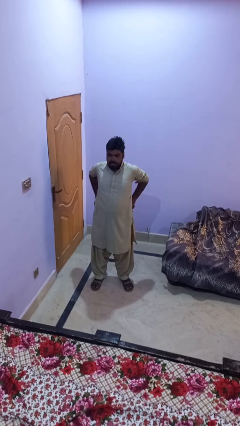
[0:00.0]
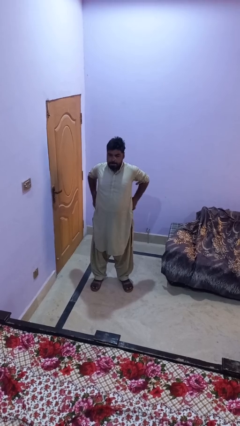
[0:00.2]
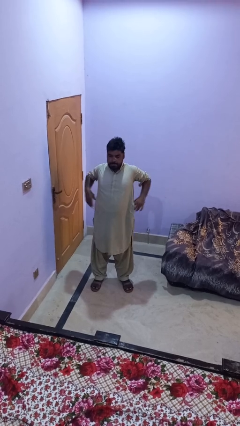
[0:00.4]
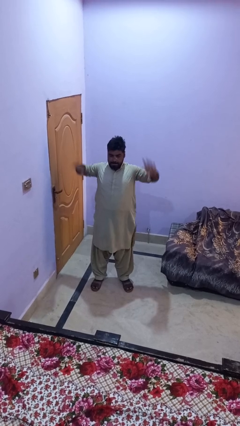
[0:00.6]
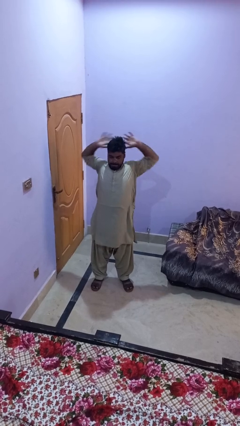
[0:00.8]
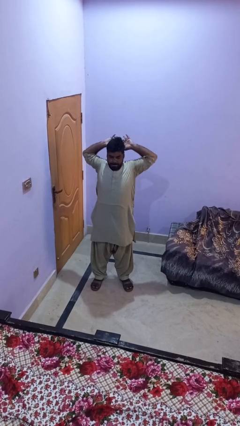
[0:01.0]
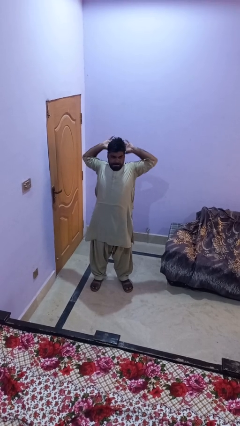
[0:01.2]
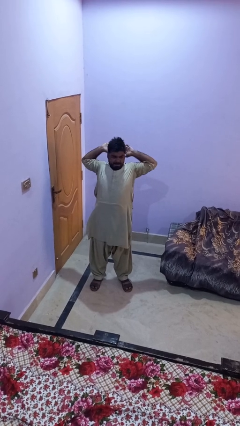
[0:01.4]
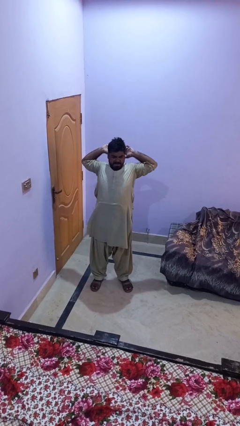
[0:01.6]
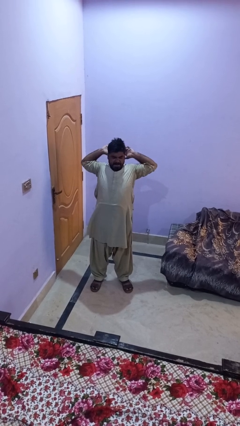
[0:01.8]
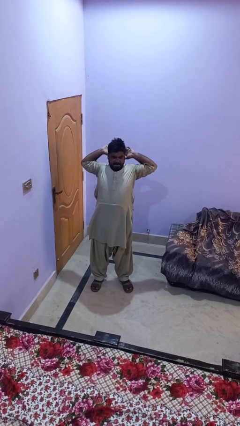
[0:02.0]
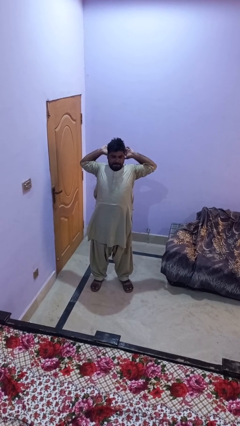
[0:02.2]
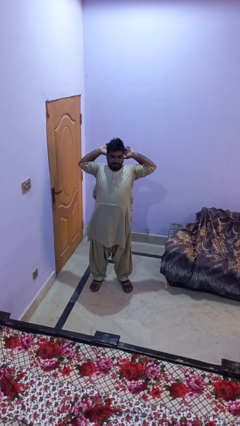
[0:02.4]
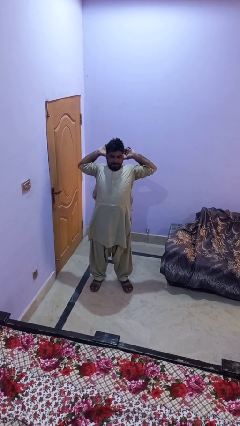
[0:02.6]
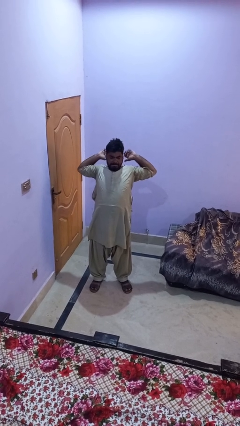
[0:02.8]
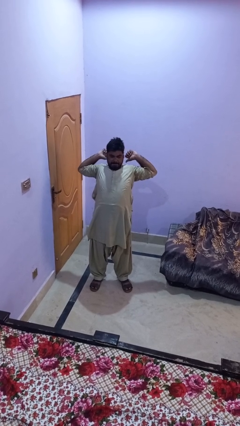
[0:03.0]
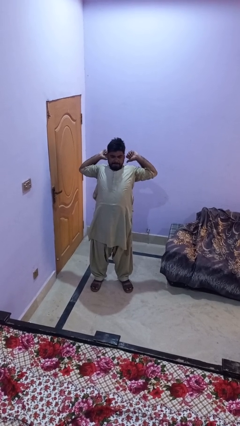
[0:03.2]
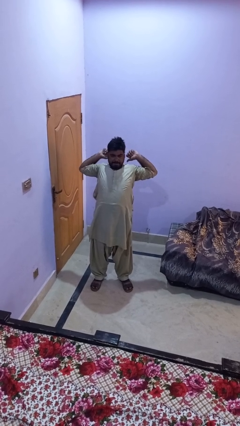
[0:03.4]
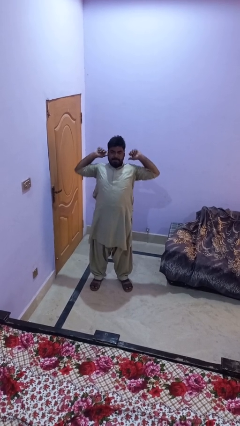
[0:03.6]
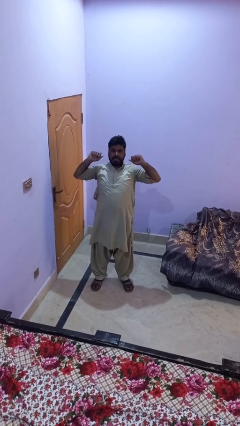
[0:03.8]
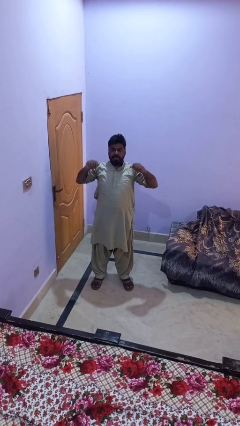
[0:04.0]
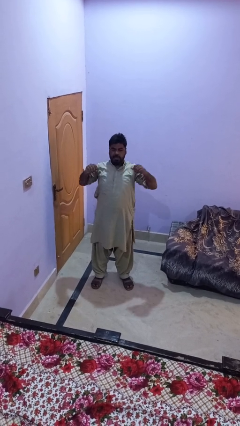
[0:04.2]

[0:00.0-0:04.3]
person stretches arms to side

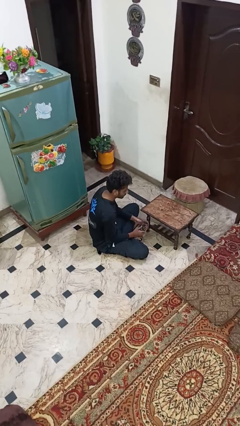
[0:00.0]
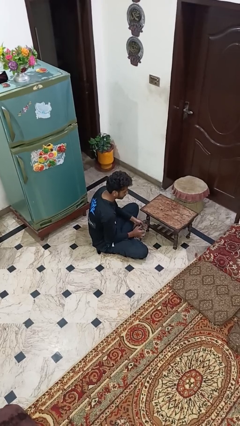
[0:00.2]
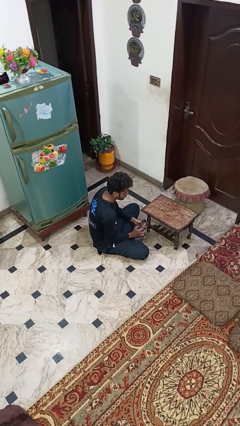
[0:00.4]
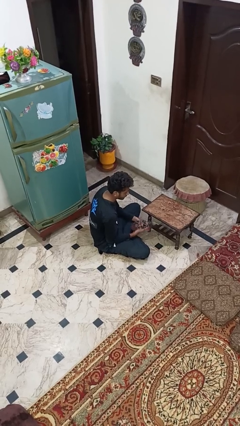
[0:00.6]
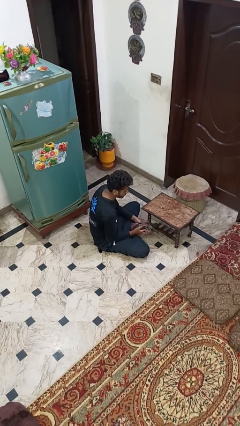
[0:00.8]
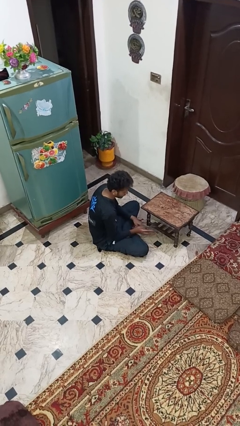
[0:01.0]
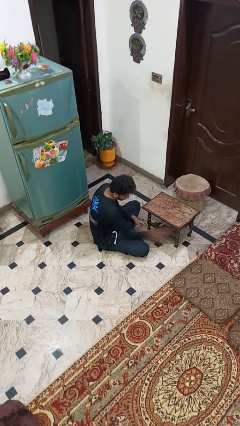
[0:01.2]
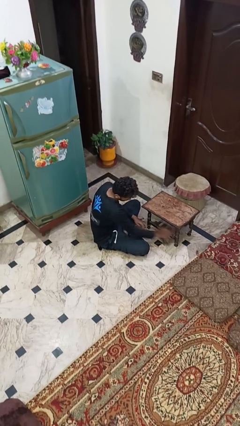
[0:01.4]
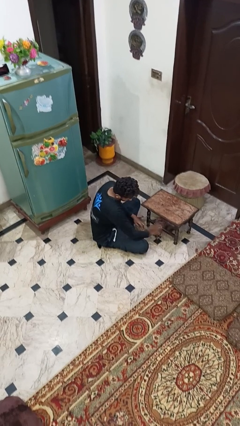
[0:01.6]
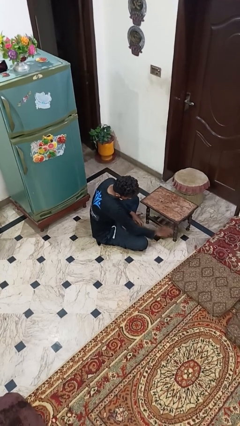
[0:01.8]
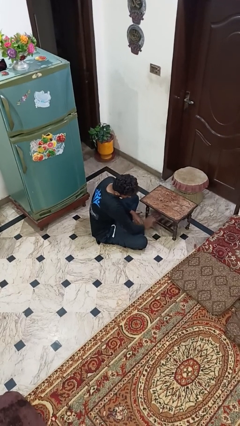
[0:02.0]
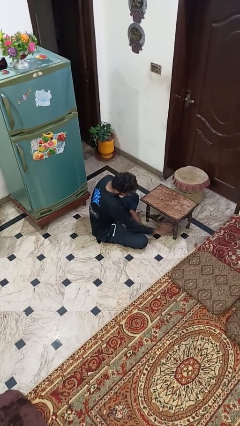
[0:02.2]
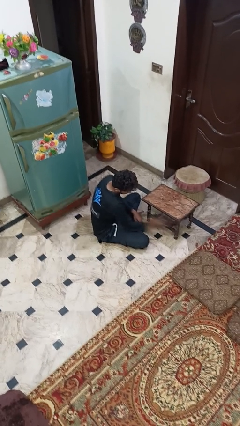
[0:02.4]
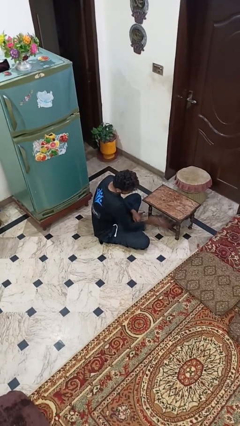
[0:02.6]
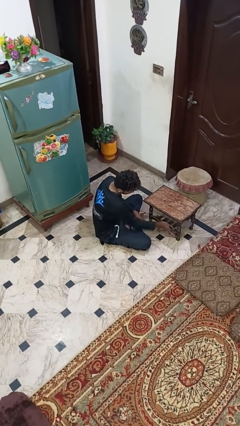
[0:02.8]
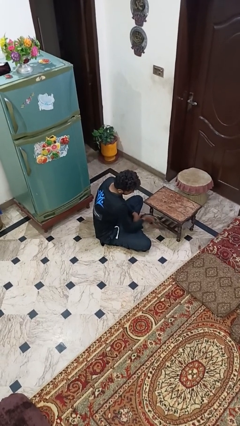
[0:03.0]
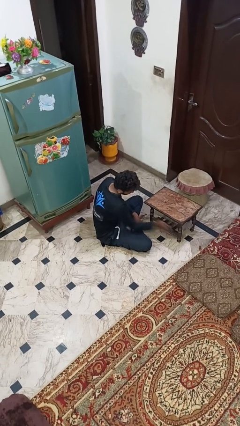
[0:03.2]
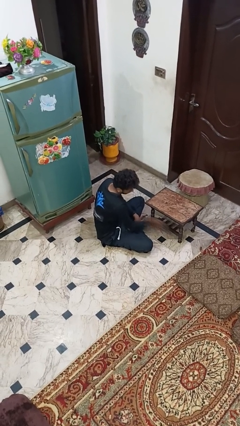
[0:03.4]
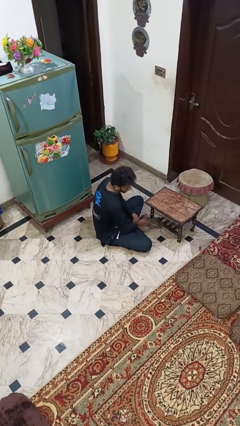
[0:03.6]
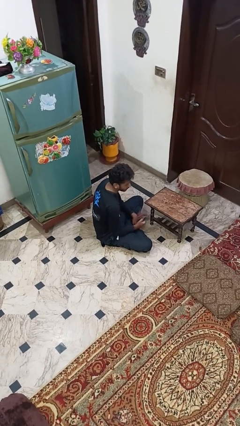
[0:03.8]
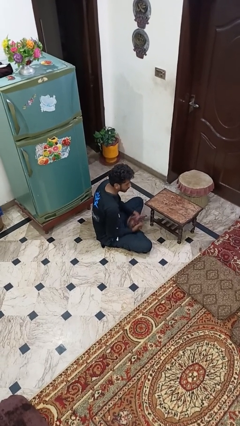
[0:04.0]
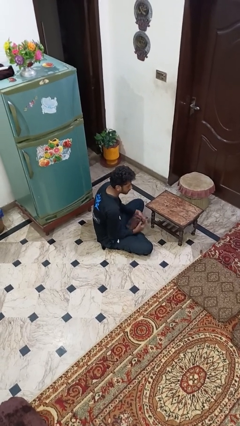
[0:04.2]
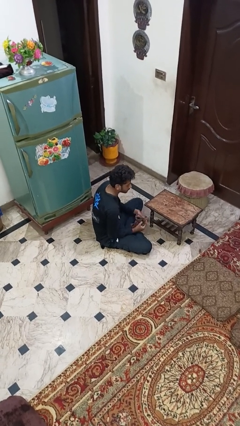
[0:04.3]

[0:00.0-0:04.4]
person cleans table with rag

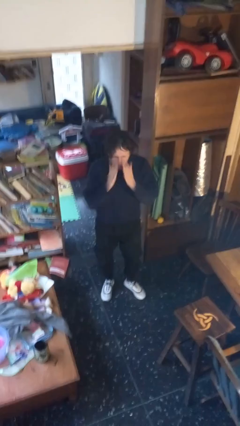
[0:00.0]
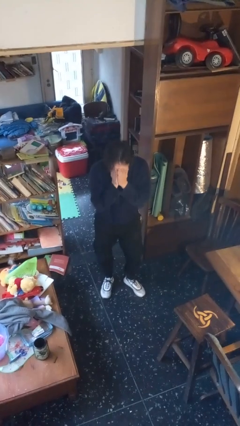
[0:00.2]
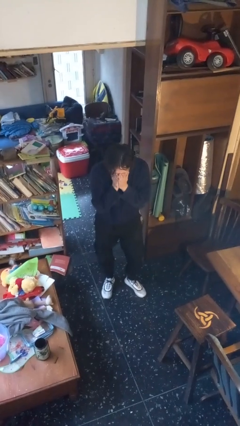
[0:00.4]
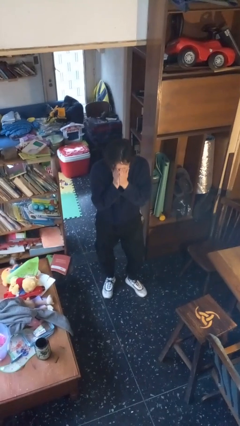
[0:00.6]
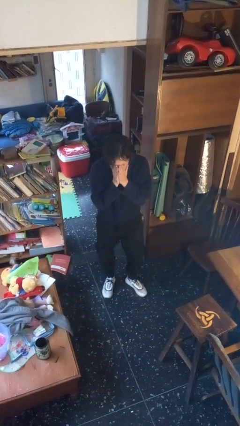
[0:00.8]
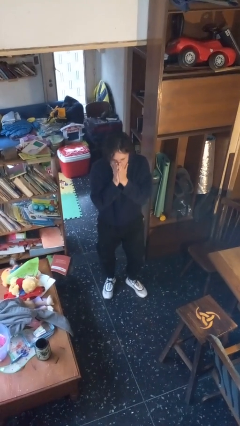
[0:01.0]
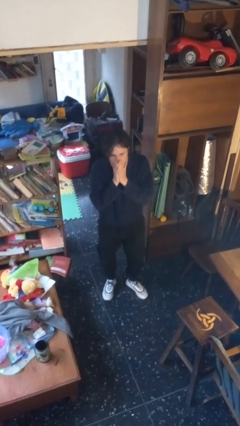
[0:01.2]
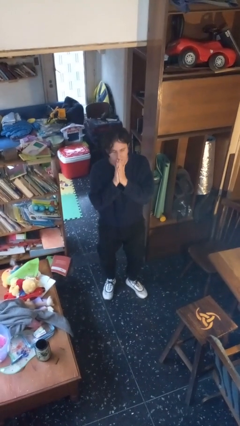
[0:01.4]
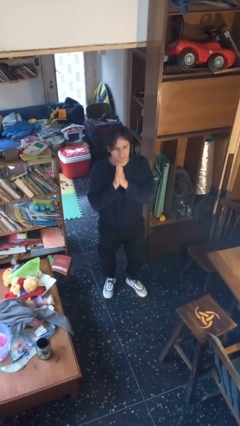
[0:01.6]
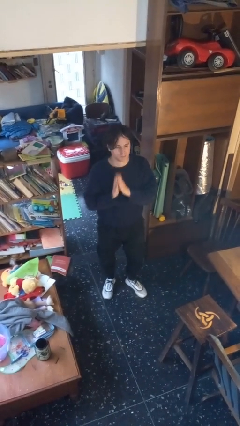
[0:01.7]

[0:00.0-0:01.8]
person sneezes into hand

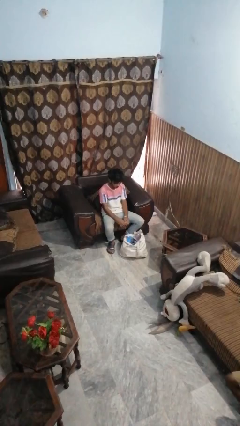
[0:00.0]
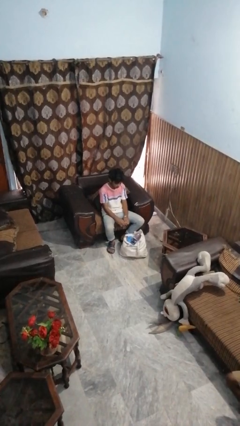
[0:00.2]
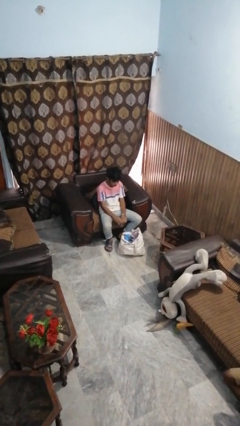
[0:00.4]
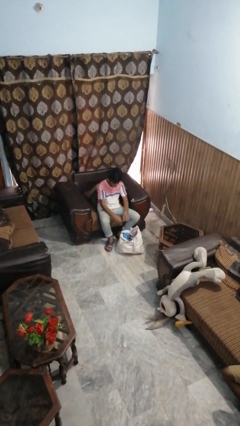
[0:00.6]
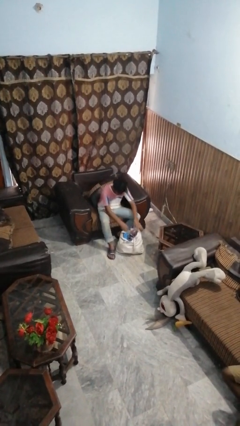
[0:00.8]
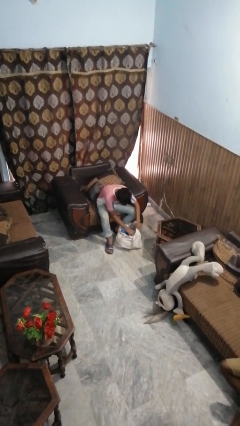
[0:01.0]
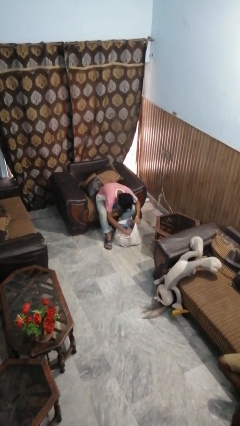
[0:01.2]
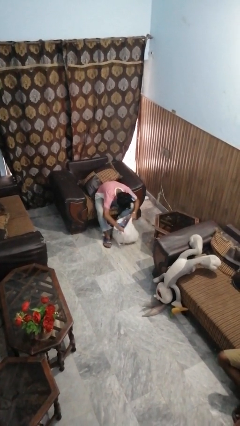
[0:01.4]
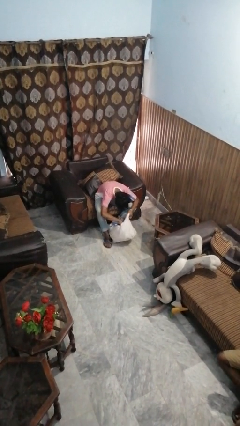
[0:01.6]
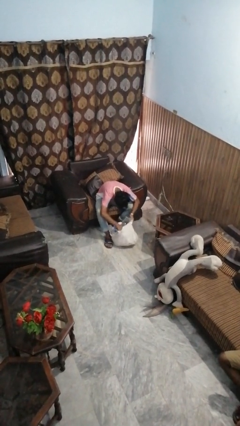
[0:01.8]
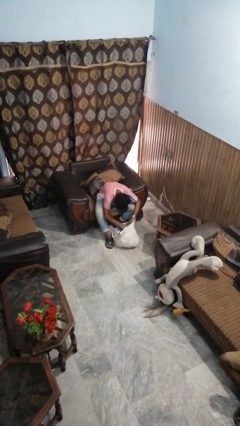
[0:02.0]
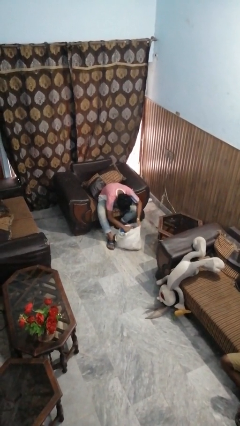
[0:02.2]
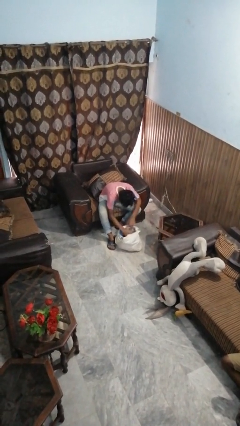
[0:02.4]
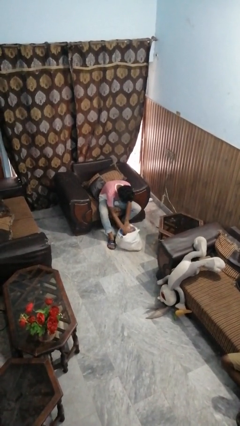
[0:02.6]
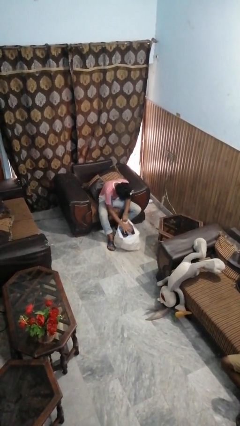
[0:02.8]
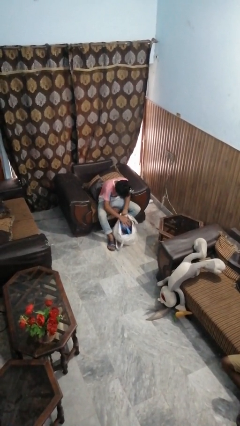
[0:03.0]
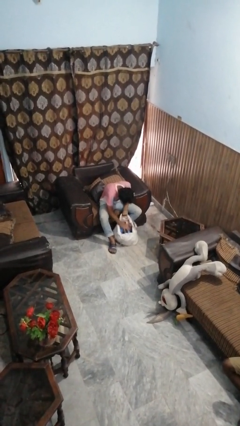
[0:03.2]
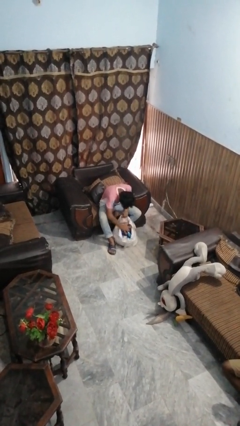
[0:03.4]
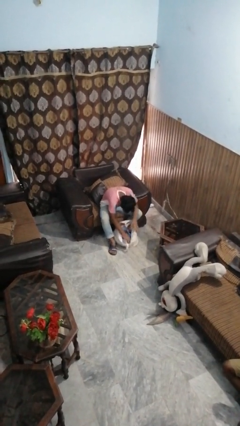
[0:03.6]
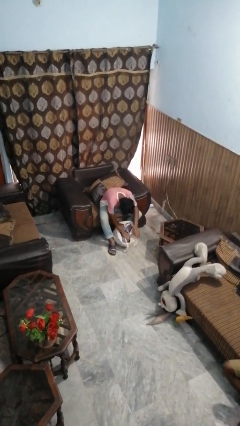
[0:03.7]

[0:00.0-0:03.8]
person searches in bag

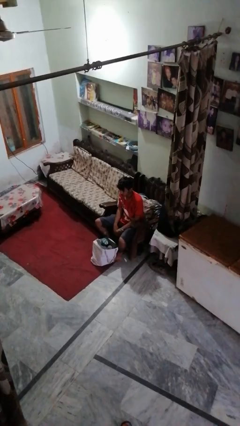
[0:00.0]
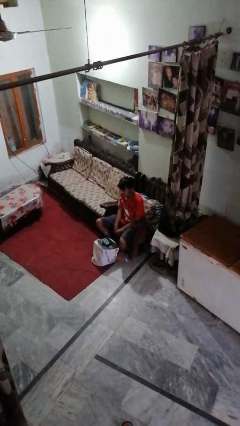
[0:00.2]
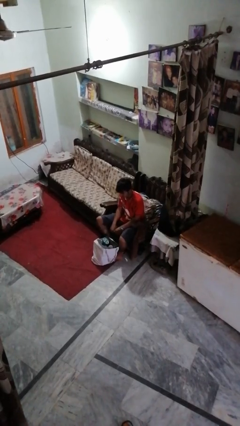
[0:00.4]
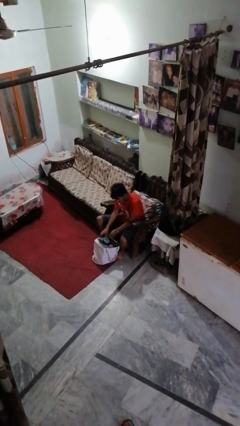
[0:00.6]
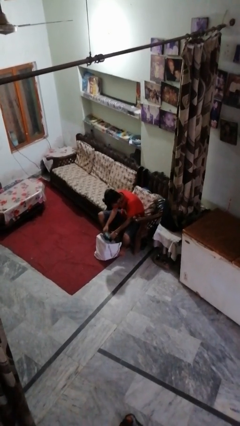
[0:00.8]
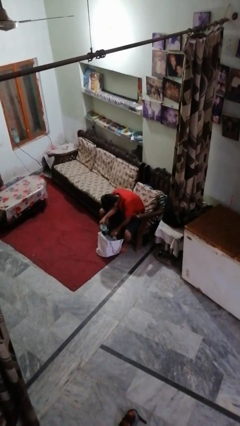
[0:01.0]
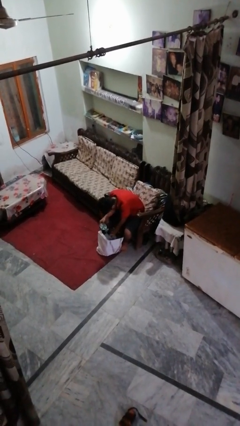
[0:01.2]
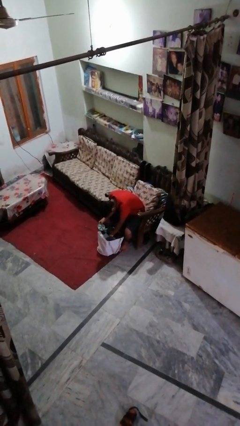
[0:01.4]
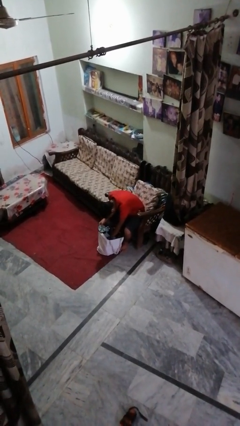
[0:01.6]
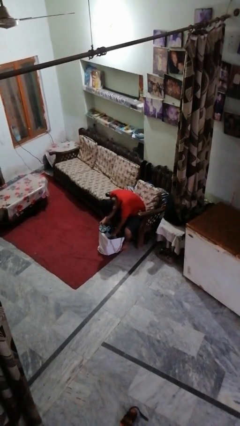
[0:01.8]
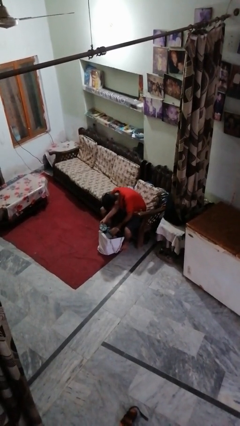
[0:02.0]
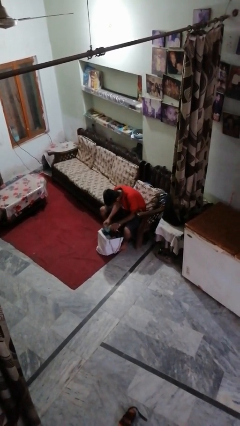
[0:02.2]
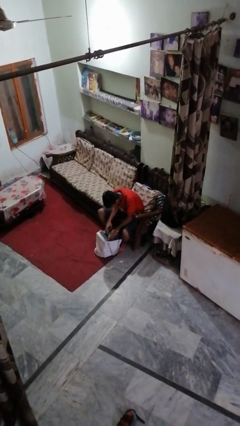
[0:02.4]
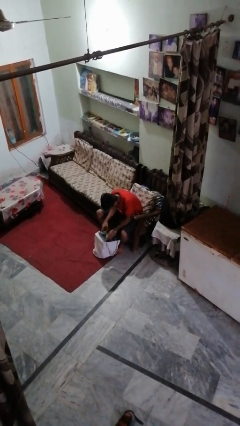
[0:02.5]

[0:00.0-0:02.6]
person searches under bed

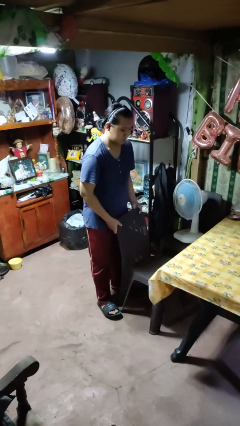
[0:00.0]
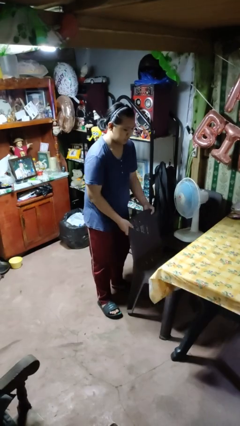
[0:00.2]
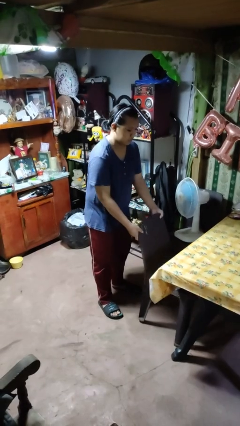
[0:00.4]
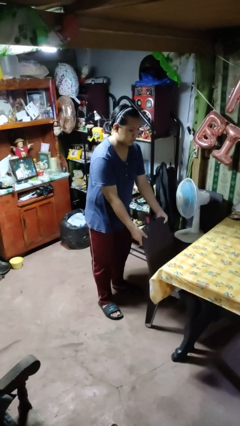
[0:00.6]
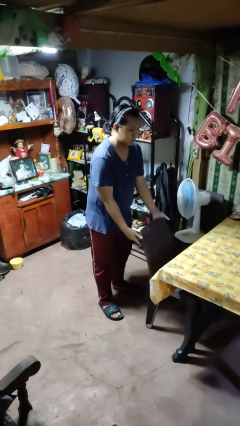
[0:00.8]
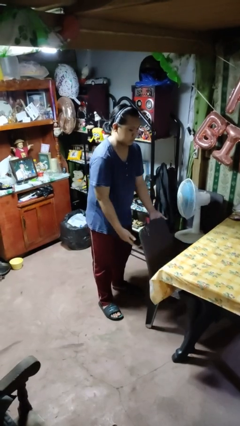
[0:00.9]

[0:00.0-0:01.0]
person pushes in chair
